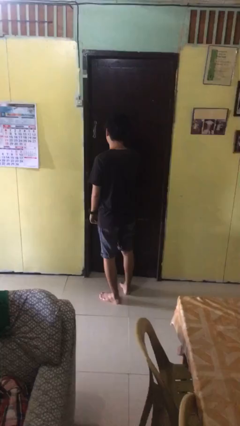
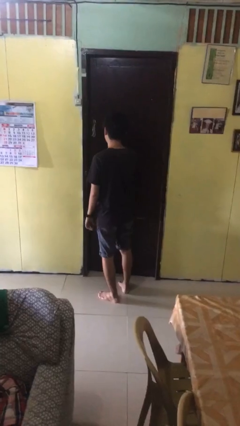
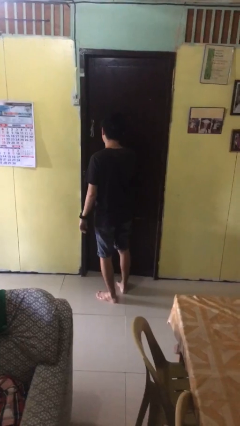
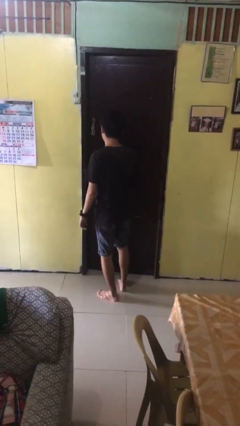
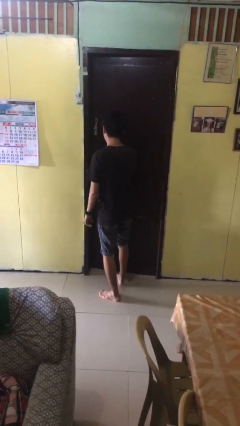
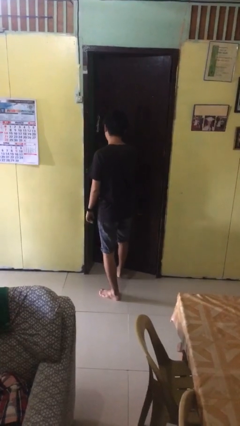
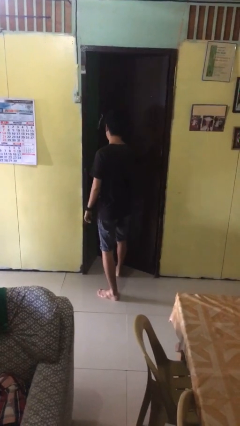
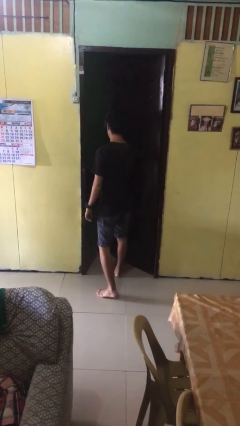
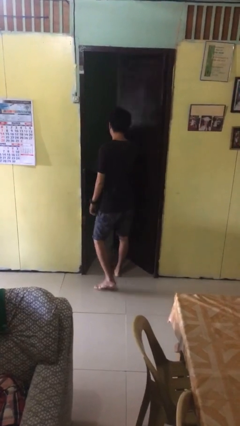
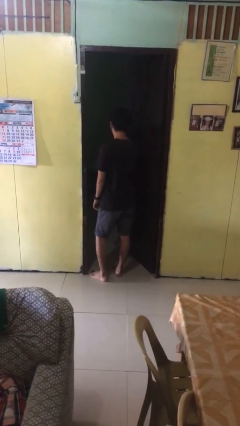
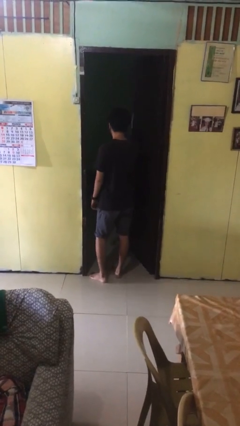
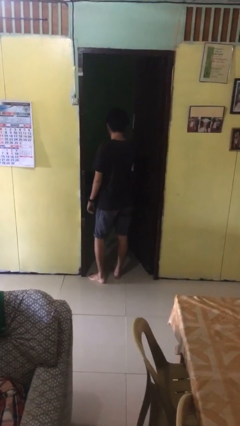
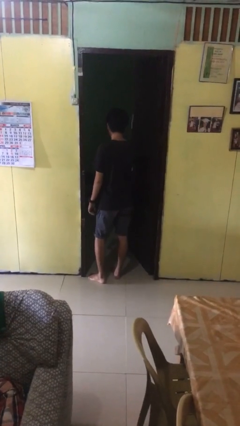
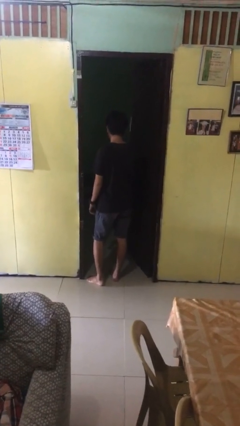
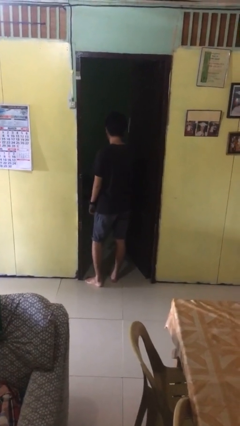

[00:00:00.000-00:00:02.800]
person opens facility door

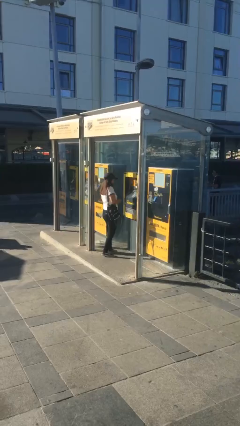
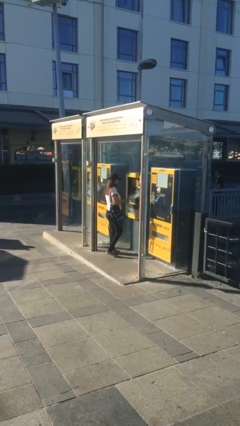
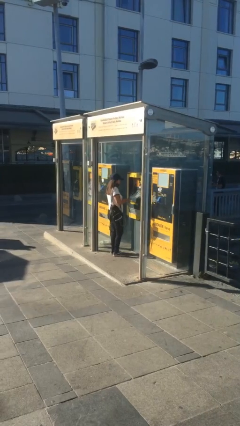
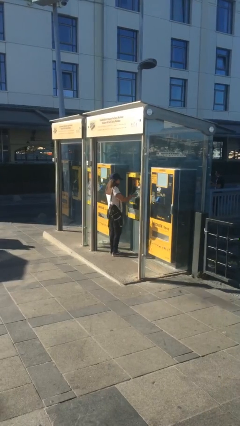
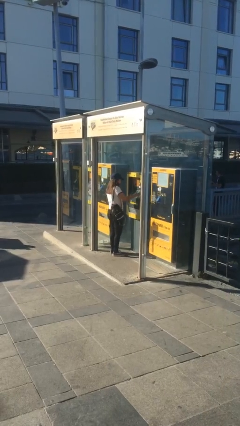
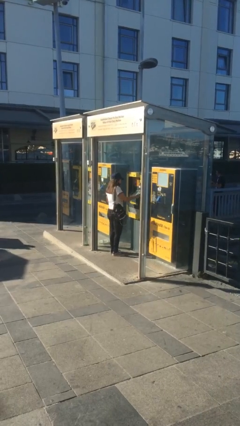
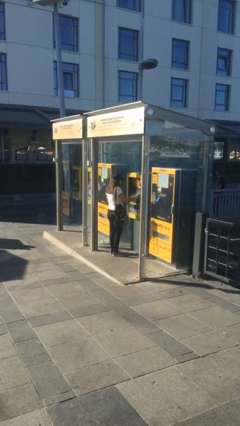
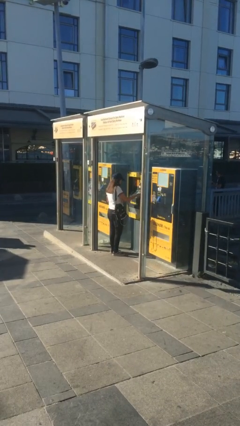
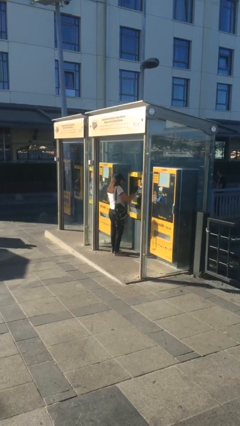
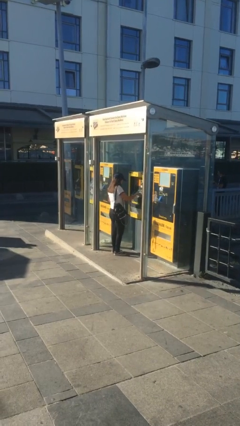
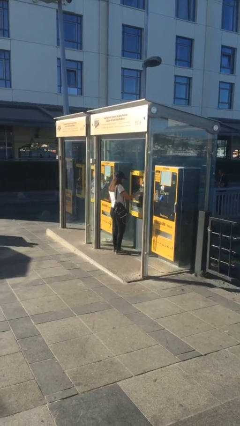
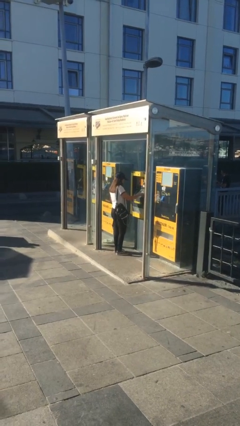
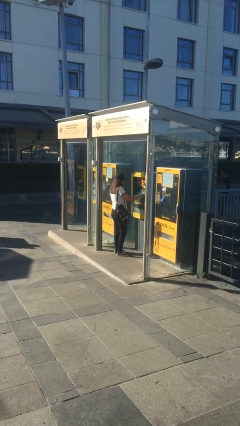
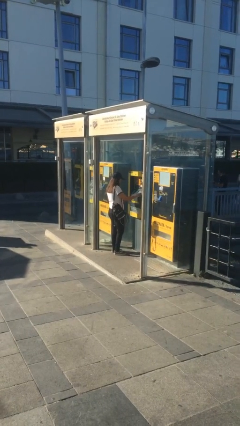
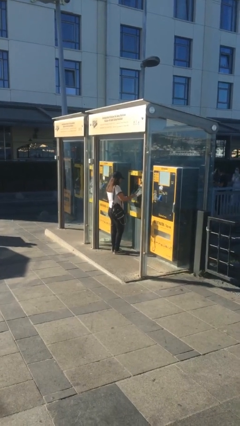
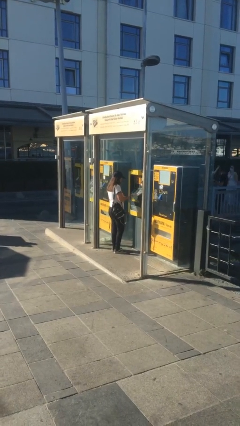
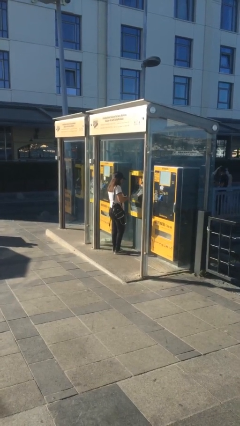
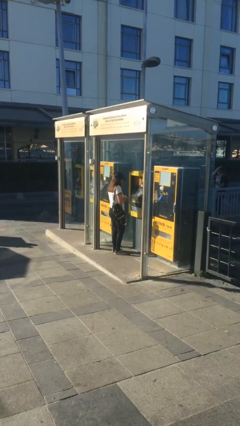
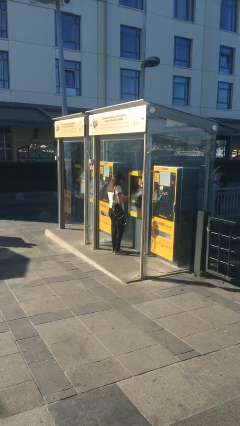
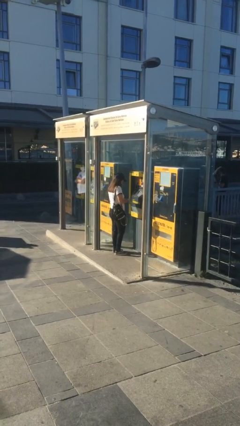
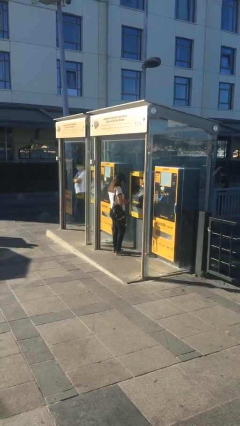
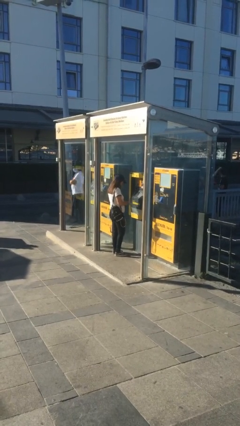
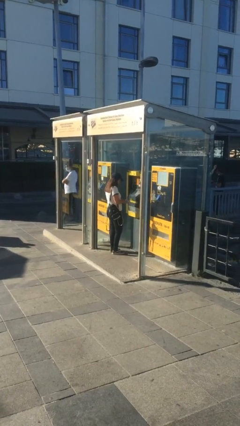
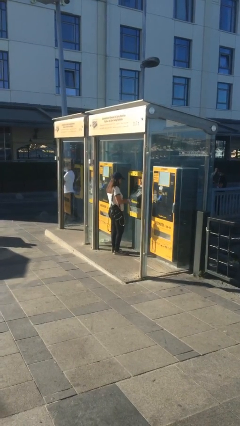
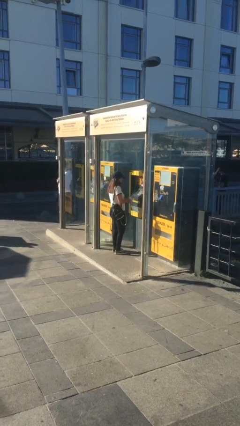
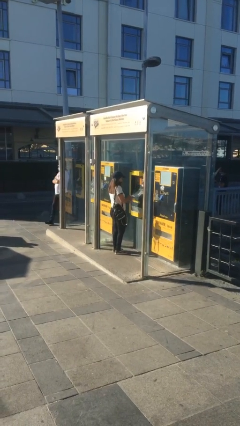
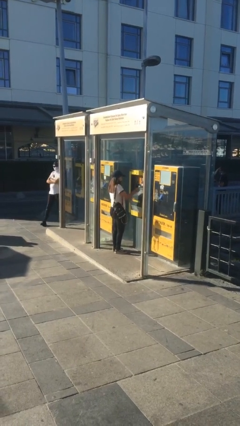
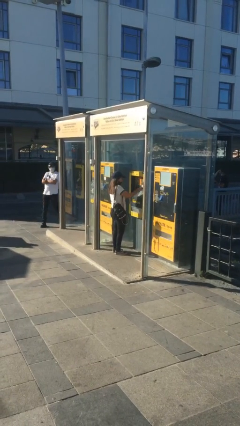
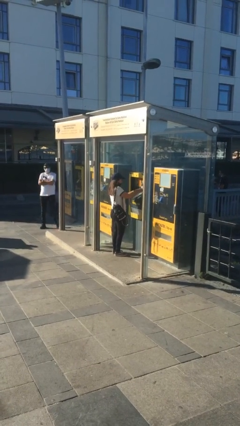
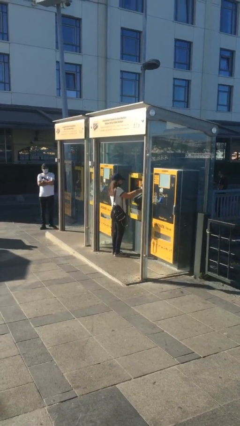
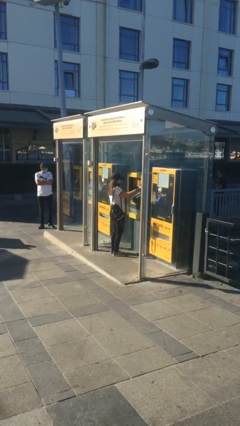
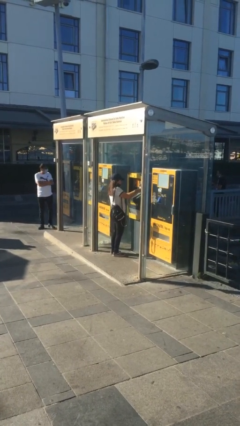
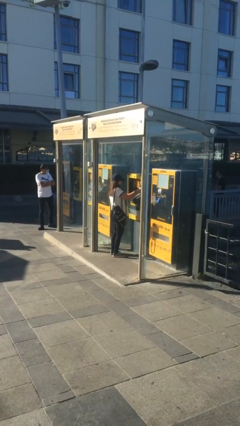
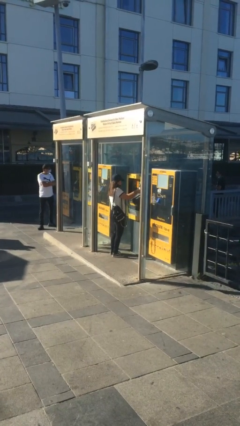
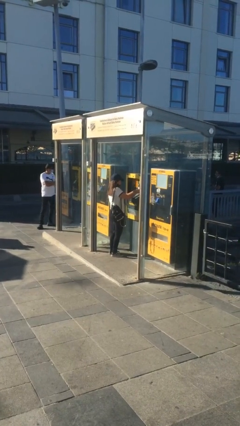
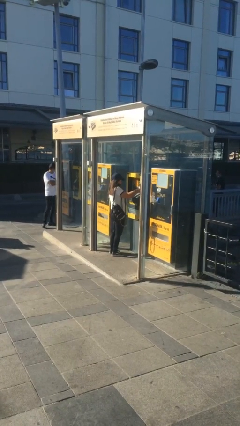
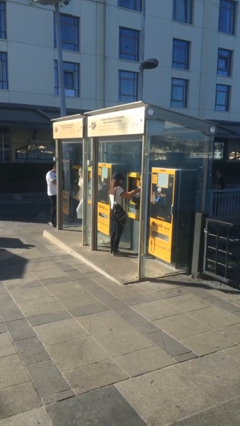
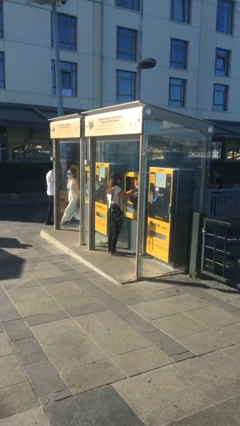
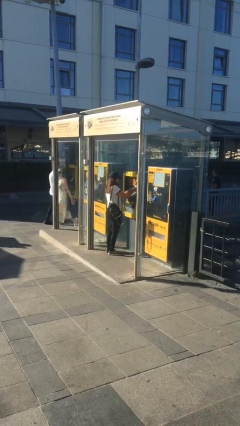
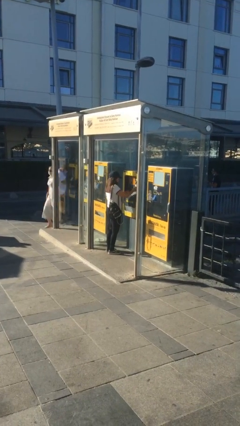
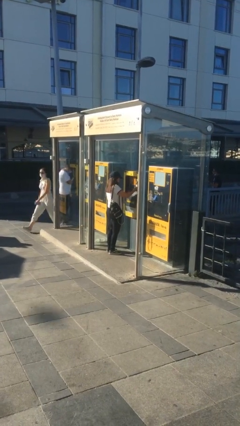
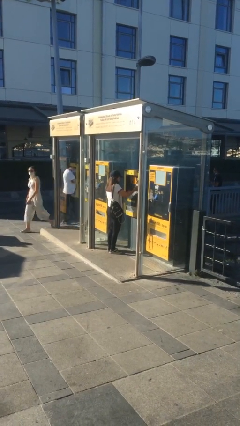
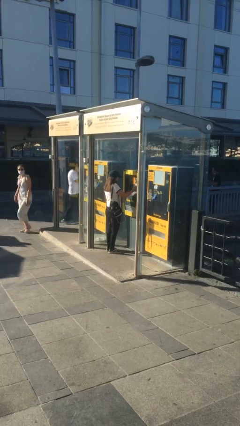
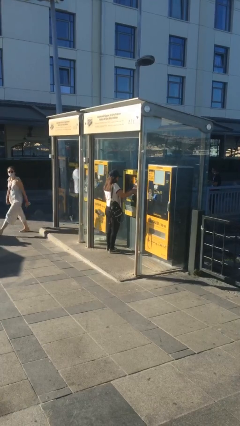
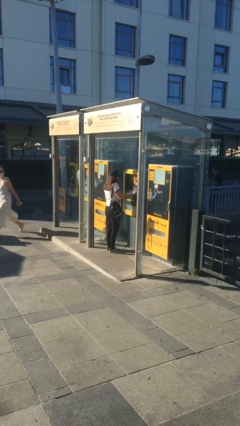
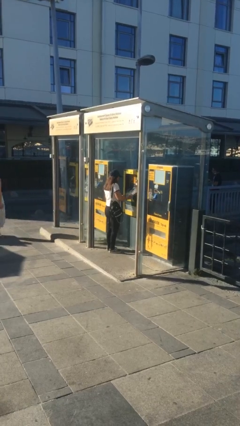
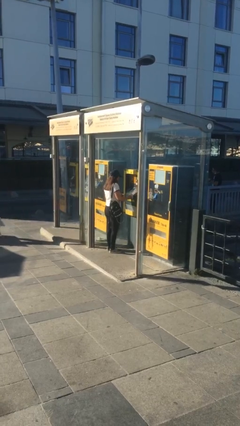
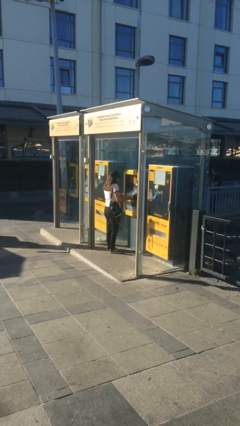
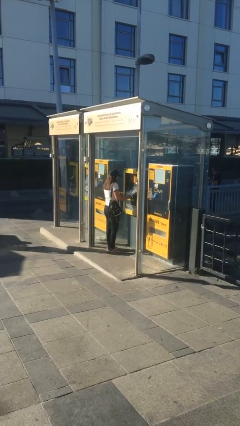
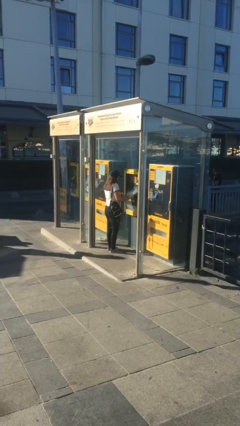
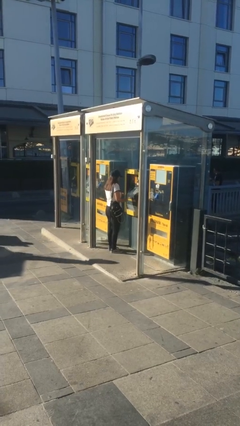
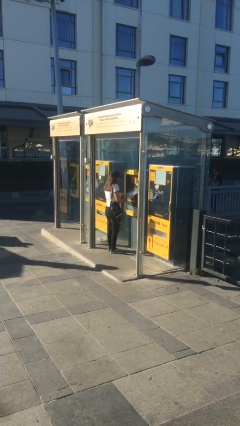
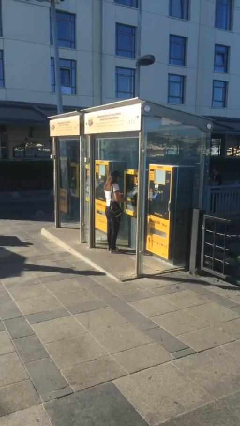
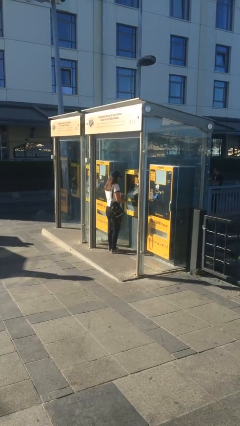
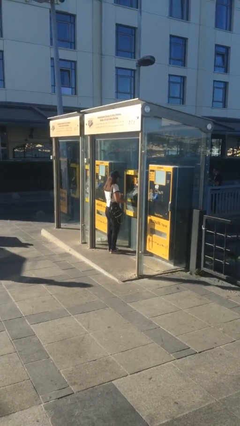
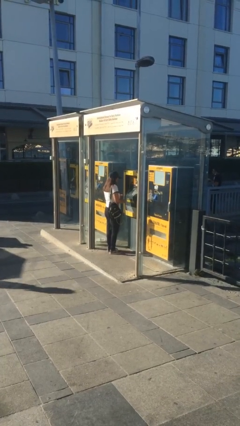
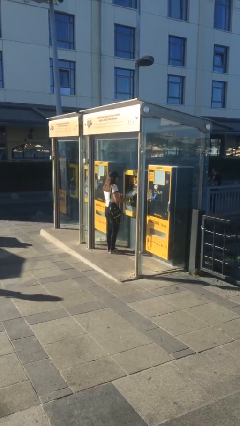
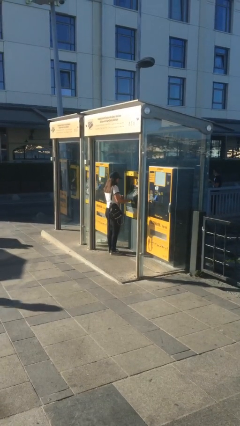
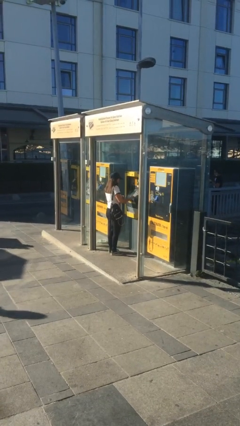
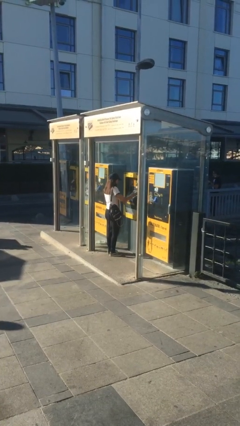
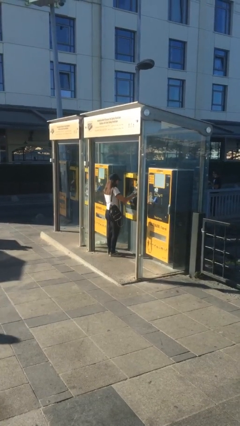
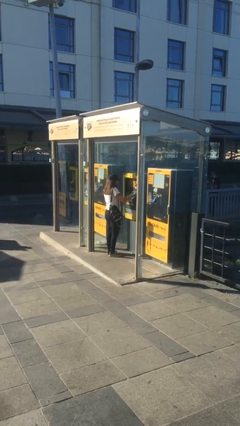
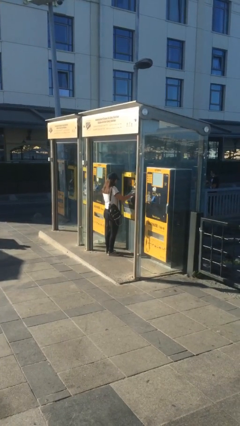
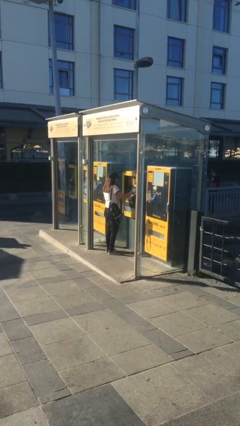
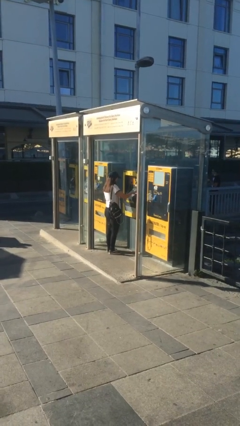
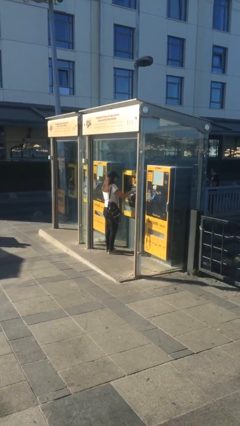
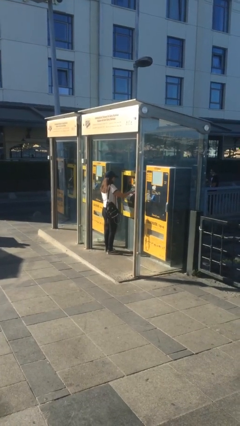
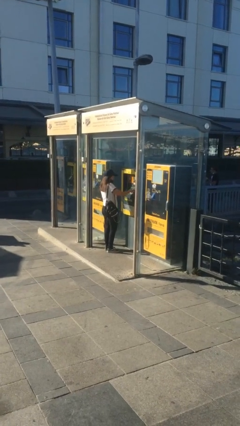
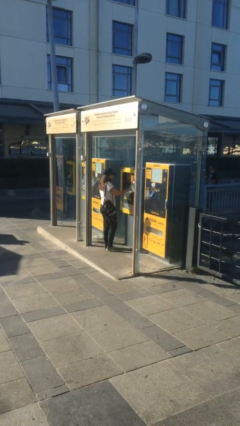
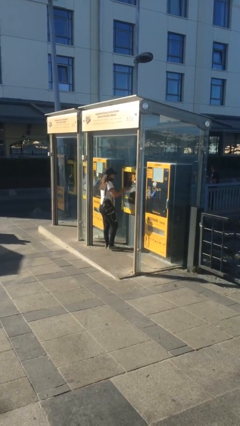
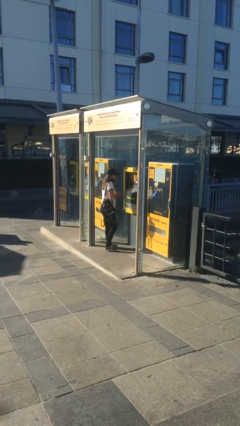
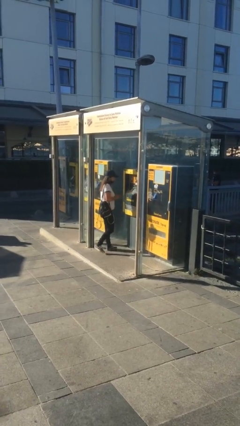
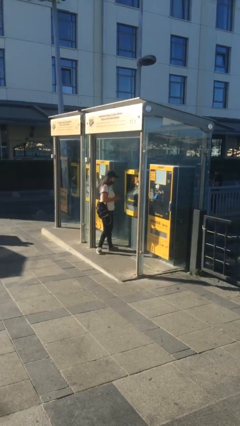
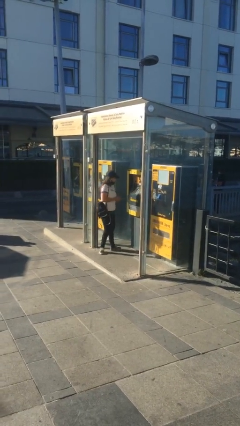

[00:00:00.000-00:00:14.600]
person purchases from machine

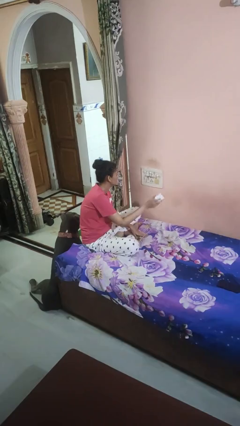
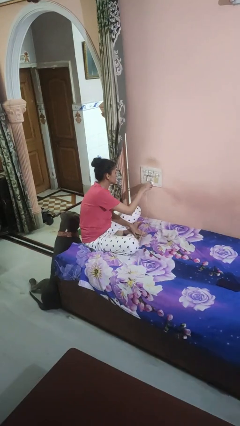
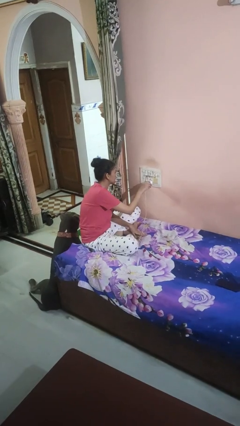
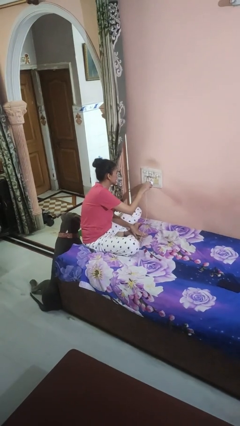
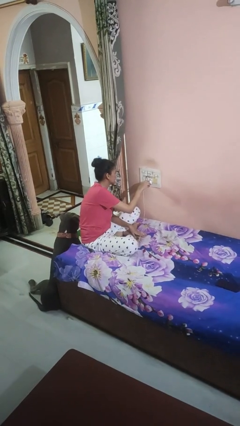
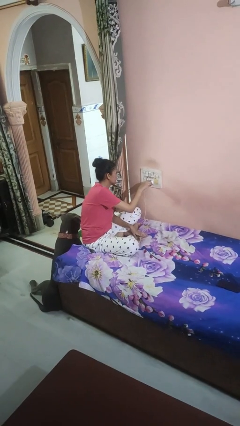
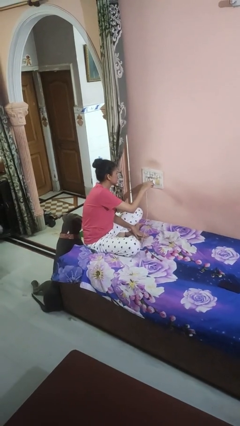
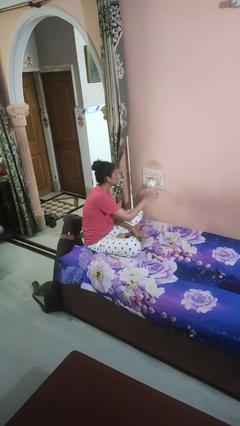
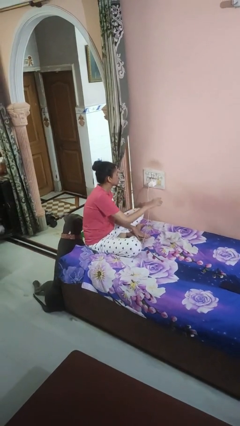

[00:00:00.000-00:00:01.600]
person plugs into electrical socket
